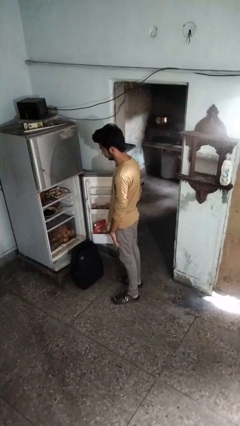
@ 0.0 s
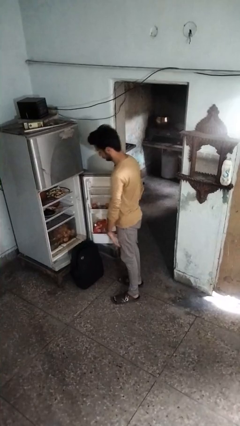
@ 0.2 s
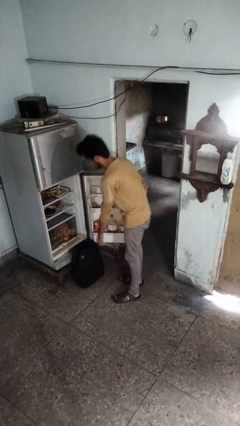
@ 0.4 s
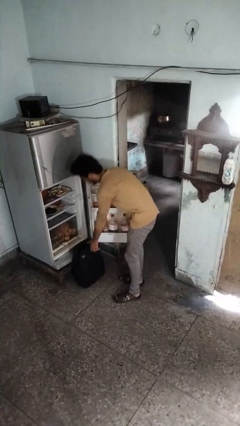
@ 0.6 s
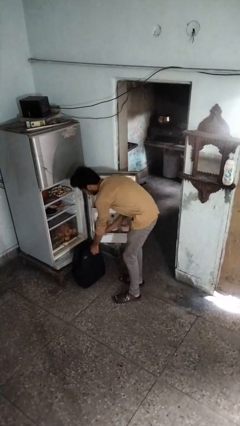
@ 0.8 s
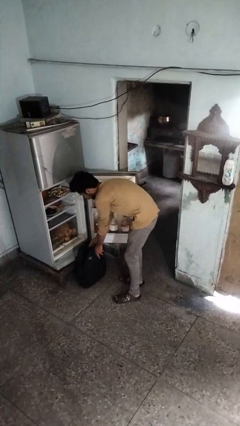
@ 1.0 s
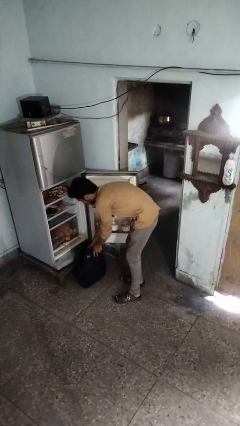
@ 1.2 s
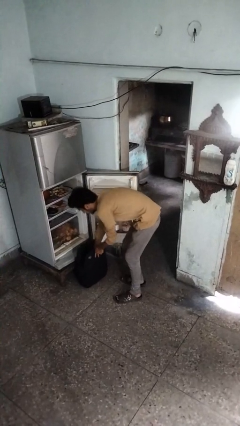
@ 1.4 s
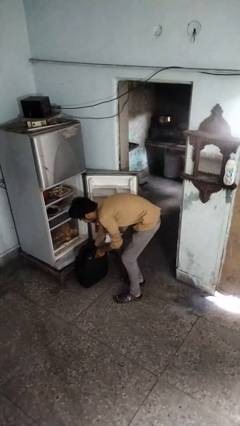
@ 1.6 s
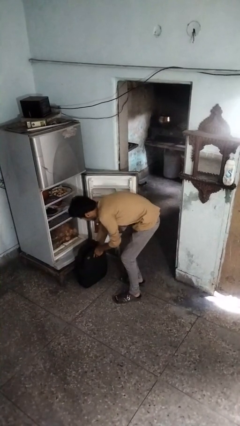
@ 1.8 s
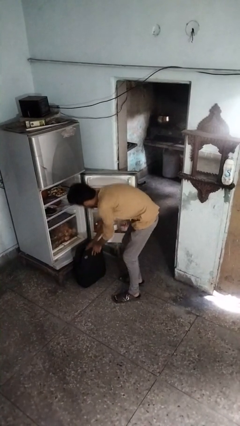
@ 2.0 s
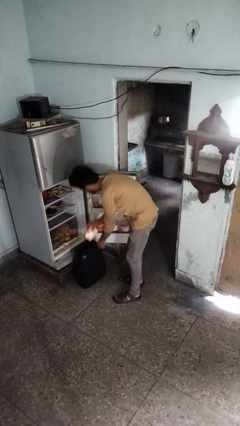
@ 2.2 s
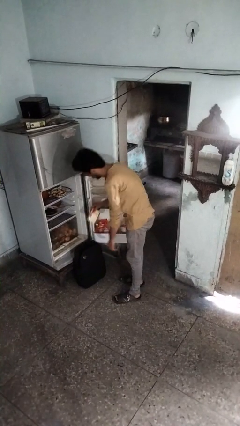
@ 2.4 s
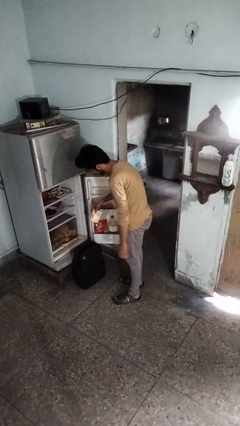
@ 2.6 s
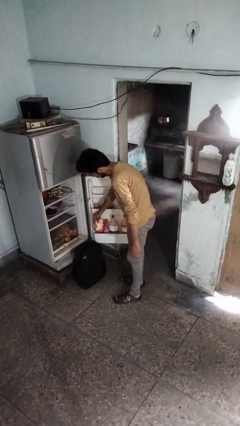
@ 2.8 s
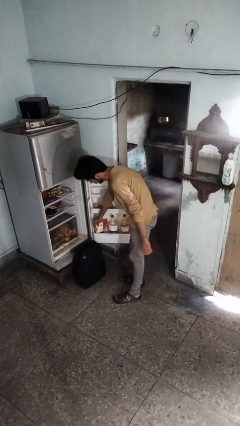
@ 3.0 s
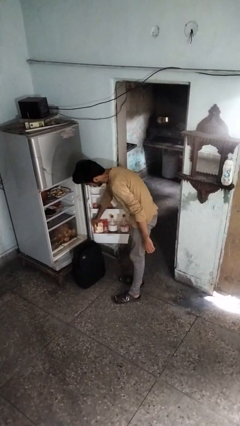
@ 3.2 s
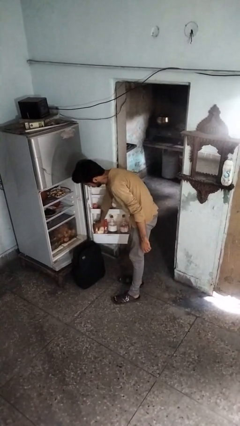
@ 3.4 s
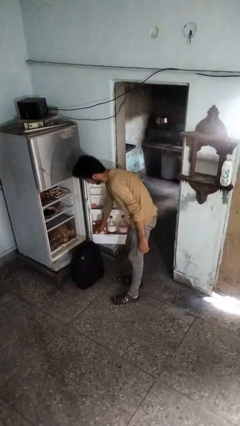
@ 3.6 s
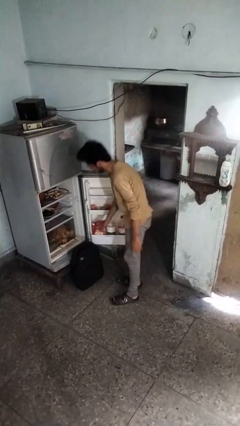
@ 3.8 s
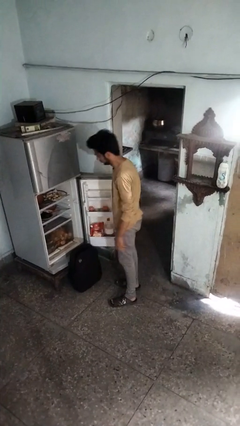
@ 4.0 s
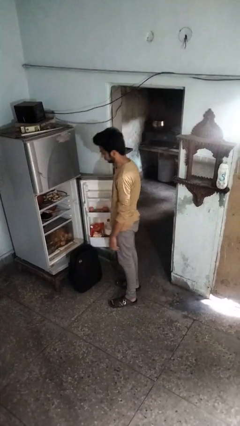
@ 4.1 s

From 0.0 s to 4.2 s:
person loads groceries into refrigerator

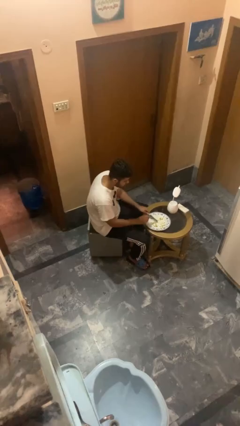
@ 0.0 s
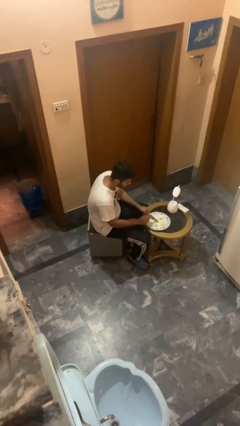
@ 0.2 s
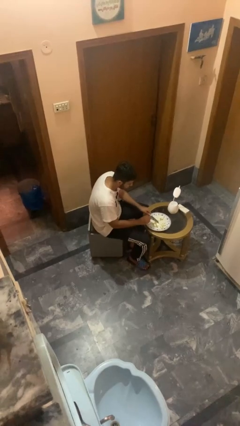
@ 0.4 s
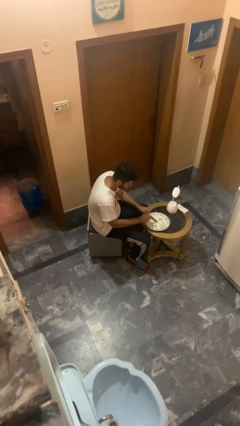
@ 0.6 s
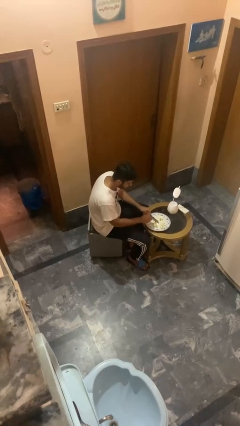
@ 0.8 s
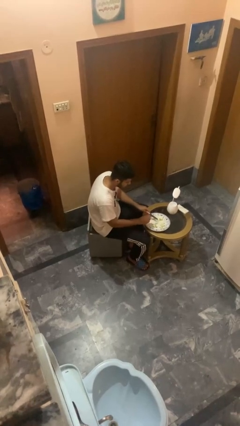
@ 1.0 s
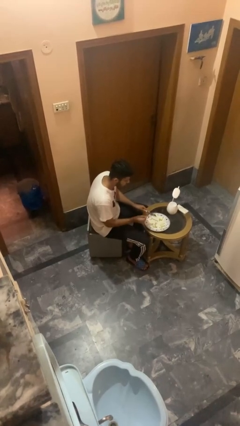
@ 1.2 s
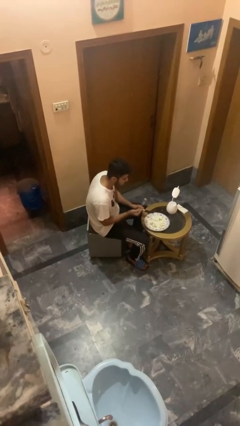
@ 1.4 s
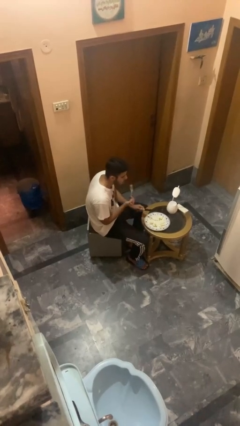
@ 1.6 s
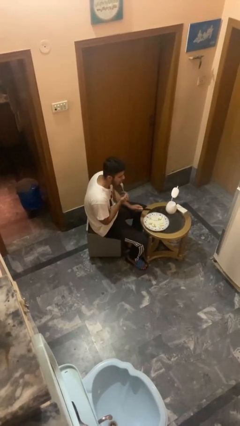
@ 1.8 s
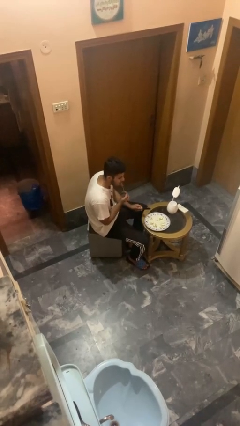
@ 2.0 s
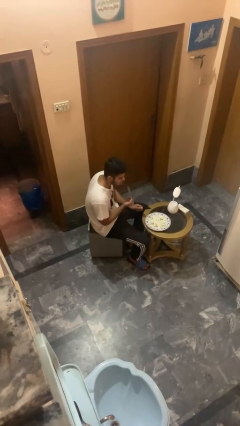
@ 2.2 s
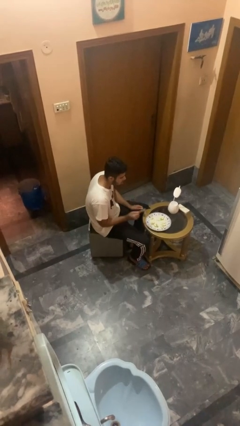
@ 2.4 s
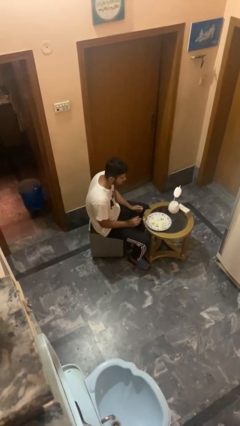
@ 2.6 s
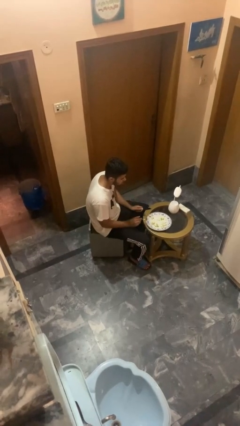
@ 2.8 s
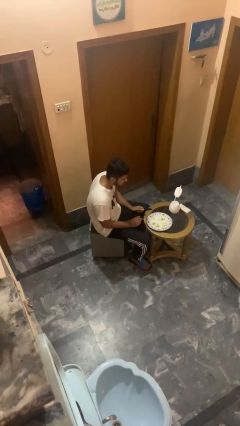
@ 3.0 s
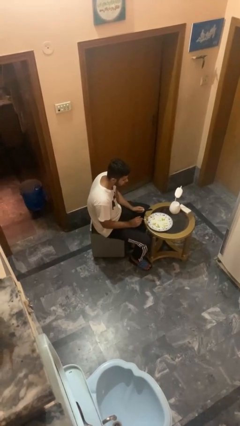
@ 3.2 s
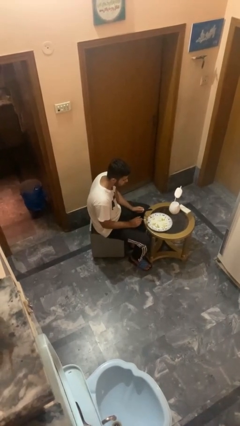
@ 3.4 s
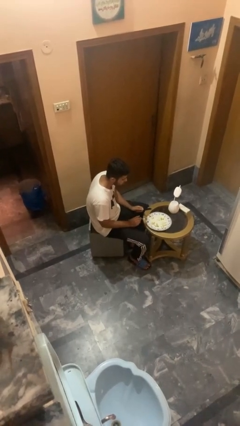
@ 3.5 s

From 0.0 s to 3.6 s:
person eats with utensil

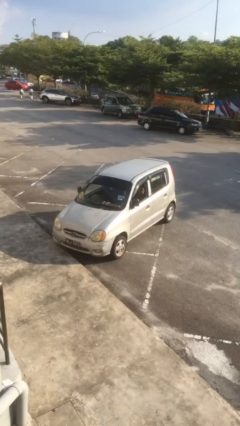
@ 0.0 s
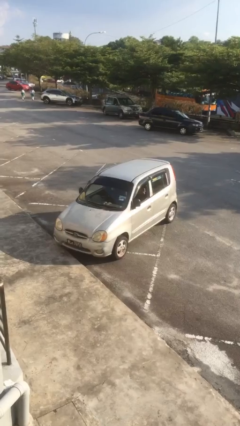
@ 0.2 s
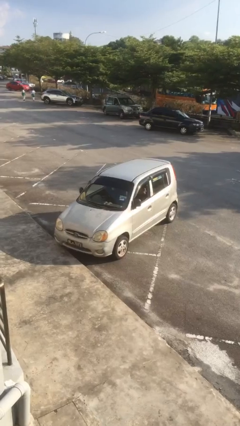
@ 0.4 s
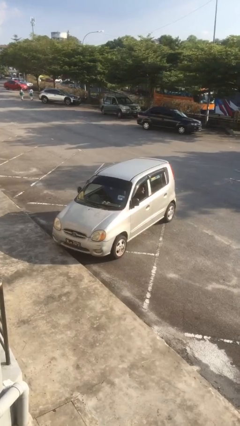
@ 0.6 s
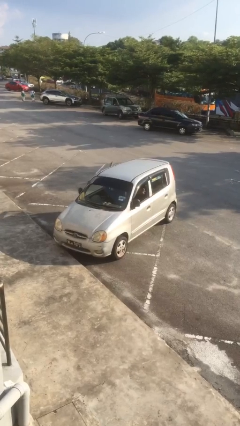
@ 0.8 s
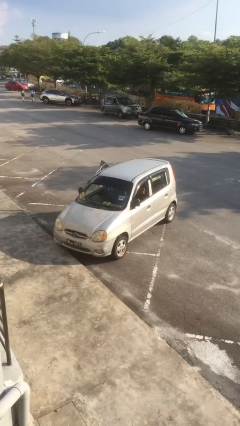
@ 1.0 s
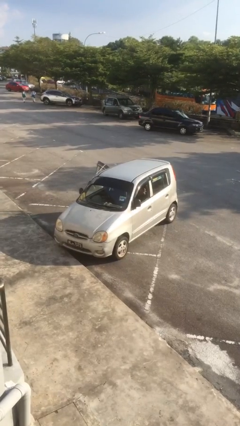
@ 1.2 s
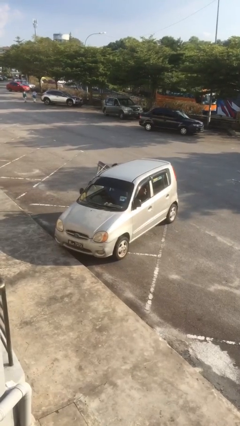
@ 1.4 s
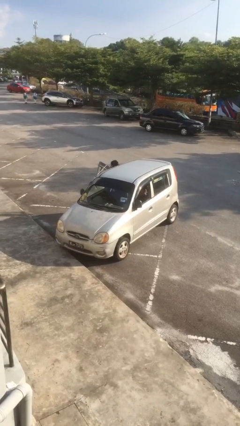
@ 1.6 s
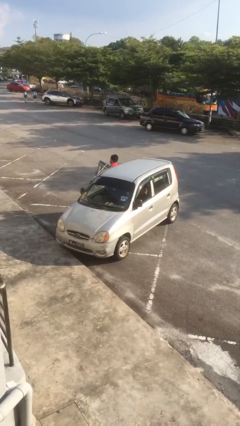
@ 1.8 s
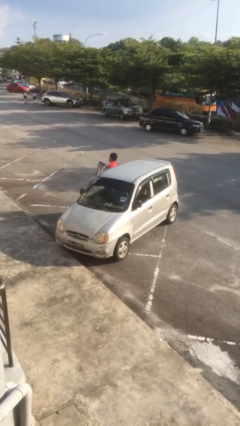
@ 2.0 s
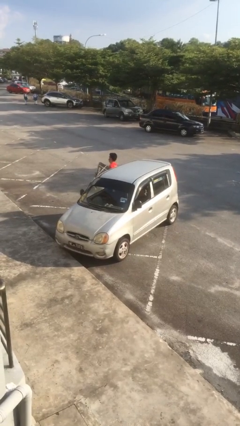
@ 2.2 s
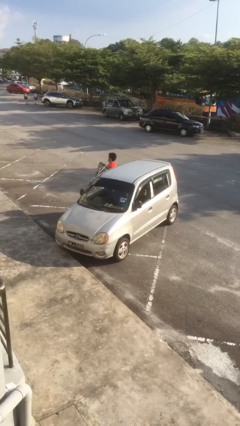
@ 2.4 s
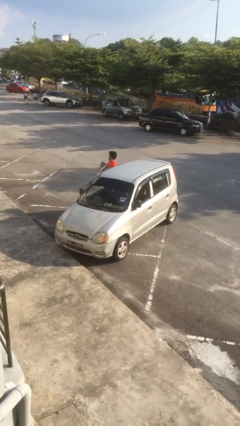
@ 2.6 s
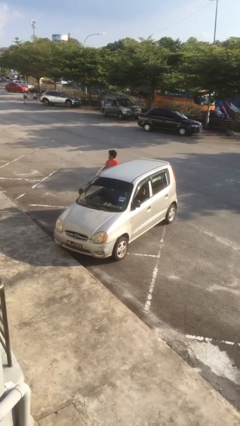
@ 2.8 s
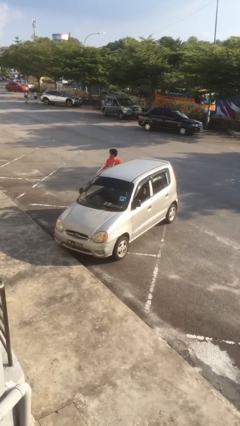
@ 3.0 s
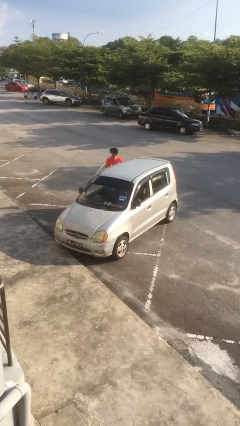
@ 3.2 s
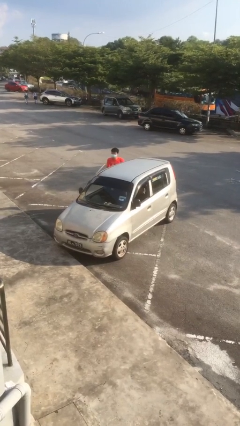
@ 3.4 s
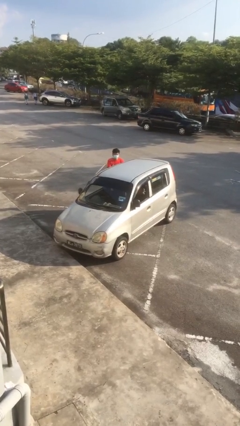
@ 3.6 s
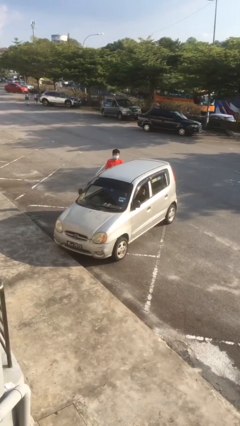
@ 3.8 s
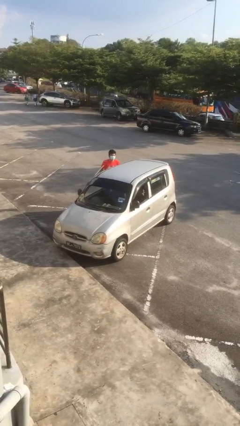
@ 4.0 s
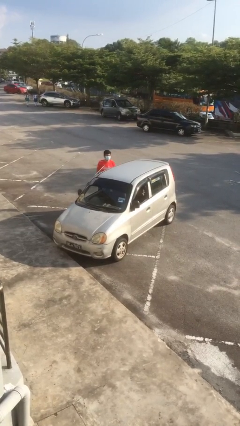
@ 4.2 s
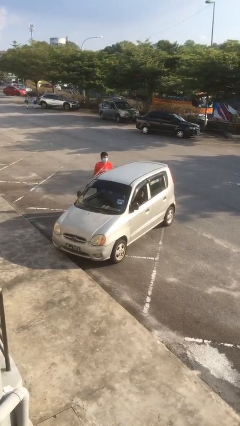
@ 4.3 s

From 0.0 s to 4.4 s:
car drops off person

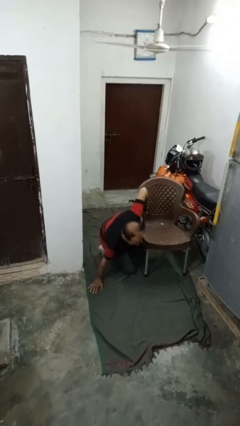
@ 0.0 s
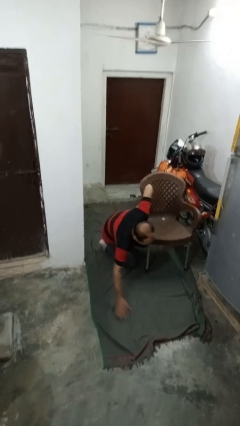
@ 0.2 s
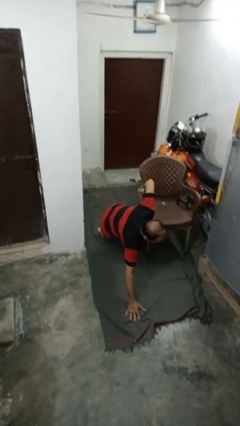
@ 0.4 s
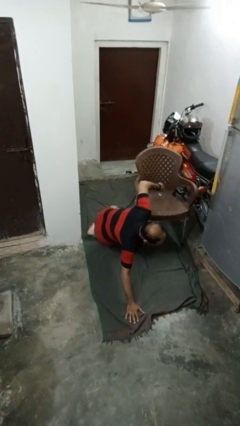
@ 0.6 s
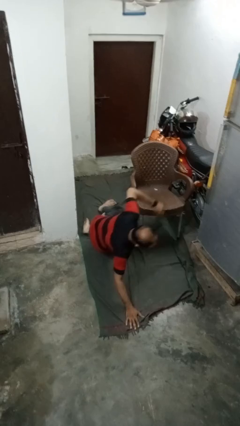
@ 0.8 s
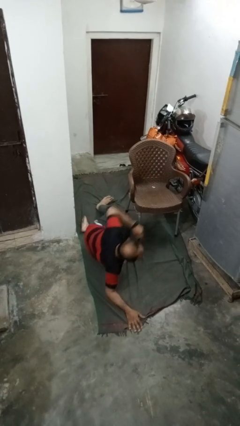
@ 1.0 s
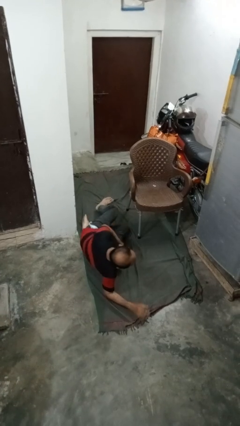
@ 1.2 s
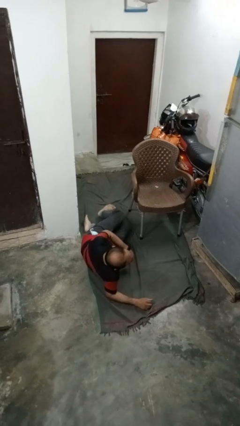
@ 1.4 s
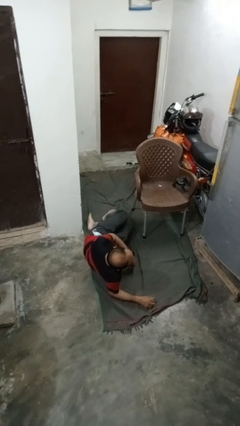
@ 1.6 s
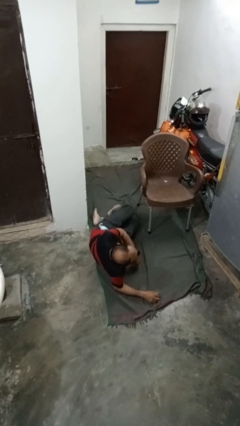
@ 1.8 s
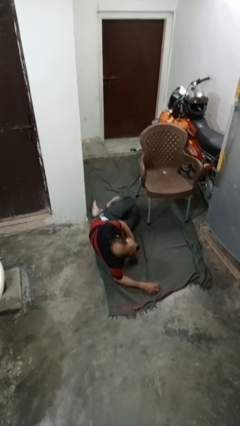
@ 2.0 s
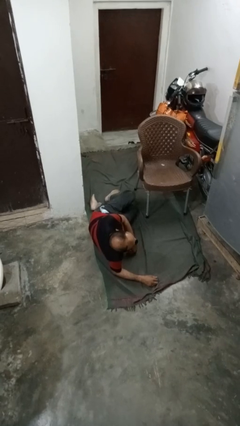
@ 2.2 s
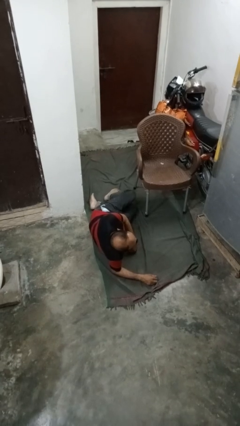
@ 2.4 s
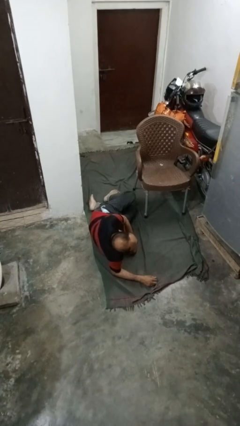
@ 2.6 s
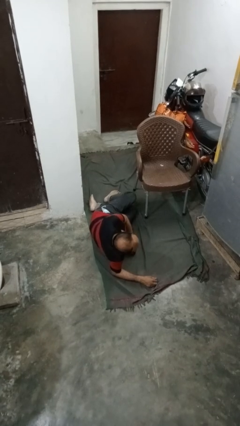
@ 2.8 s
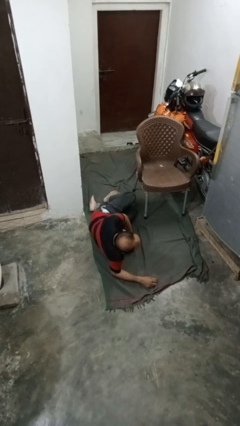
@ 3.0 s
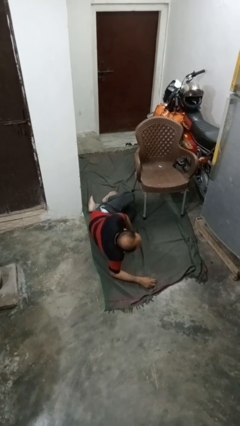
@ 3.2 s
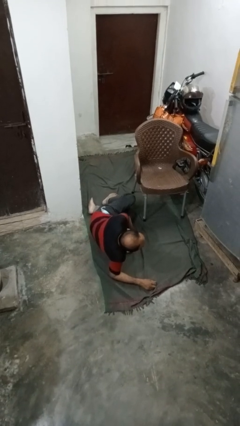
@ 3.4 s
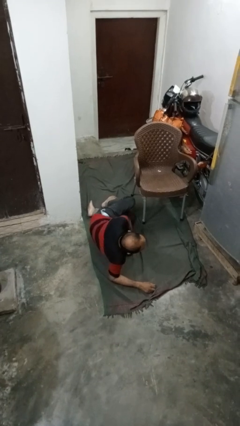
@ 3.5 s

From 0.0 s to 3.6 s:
person lies down on floor

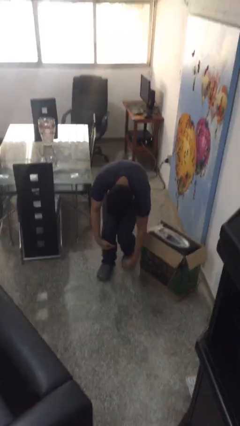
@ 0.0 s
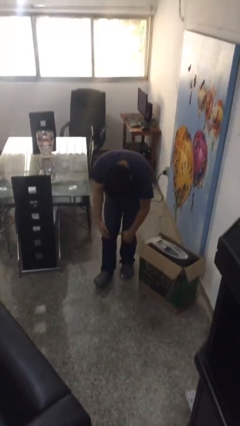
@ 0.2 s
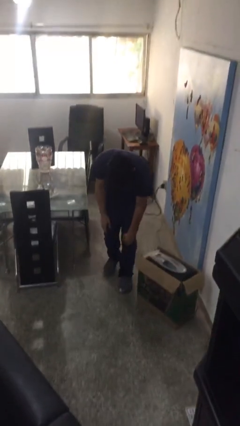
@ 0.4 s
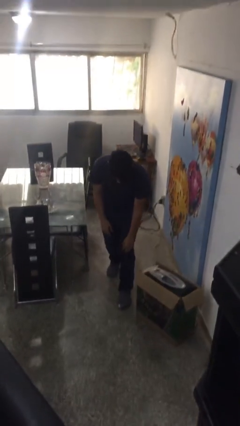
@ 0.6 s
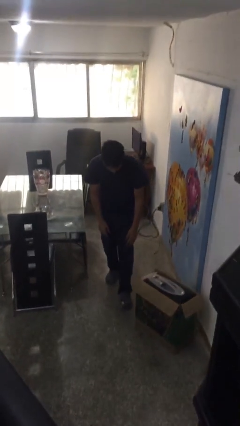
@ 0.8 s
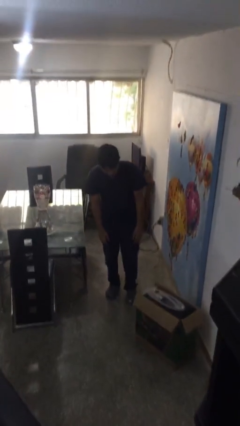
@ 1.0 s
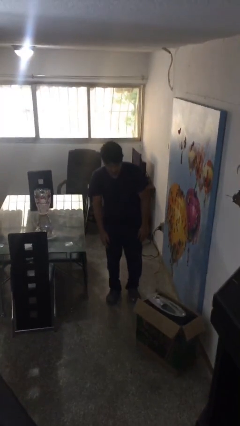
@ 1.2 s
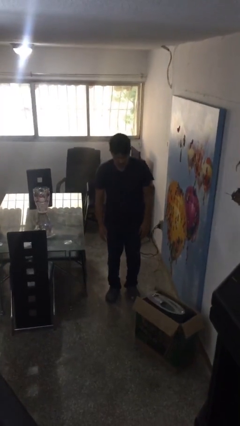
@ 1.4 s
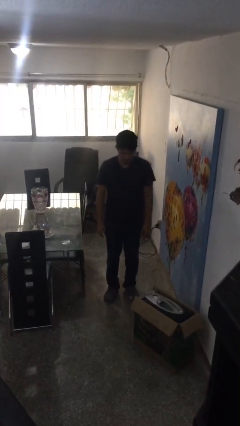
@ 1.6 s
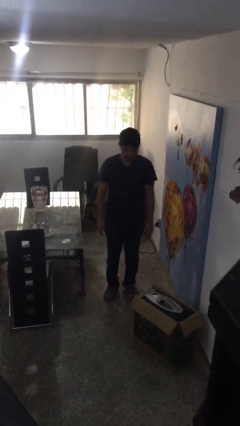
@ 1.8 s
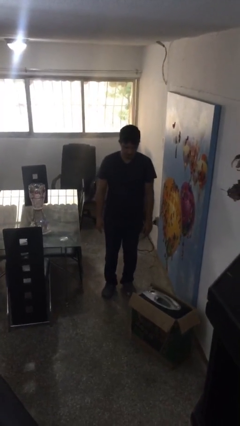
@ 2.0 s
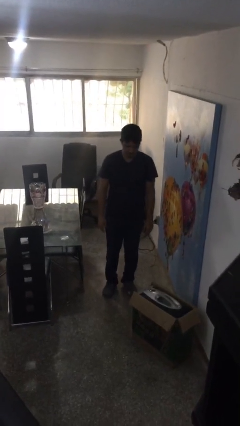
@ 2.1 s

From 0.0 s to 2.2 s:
person stands up from floor
